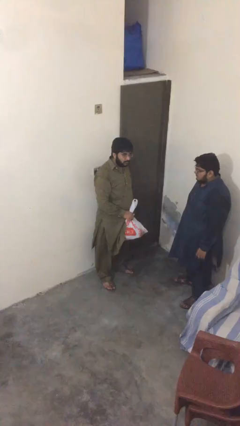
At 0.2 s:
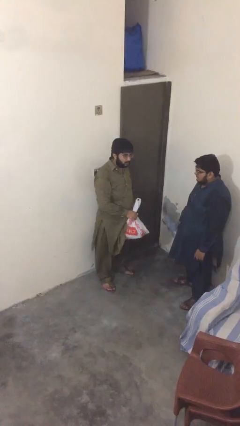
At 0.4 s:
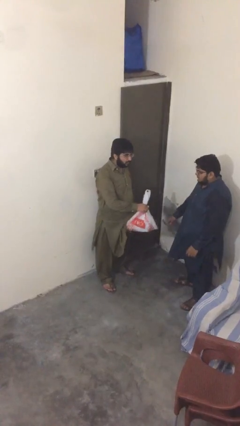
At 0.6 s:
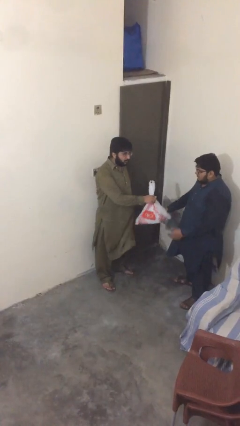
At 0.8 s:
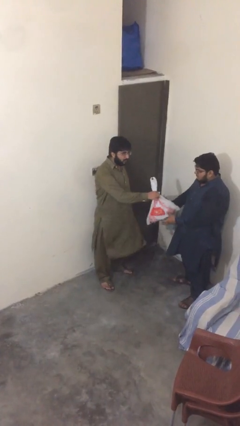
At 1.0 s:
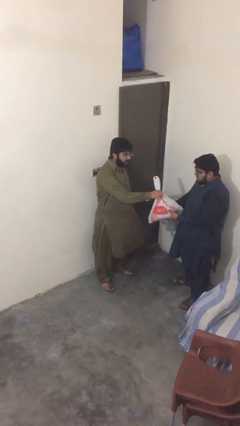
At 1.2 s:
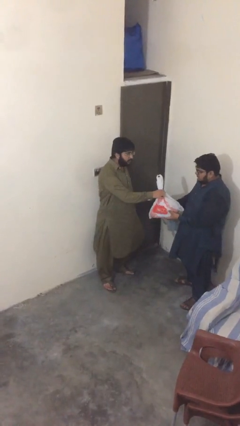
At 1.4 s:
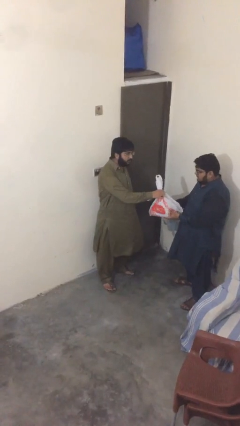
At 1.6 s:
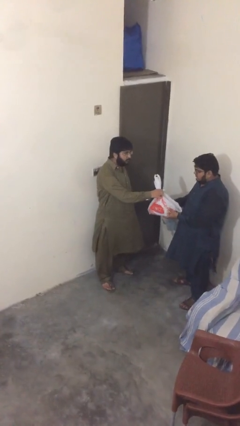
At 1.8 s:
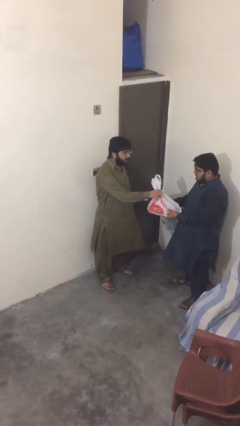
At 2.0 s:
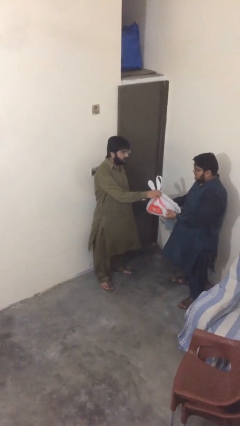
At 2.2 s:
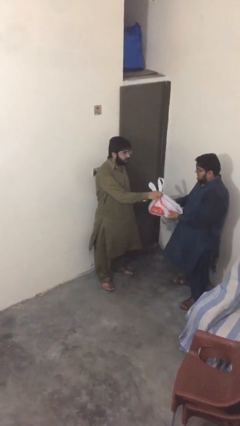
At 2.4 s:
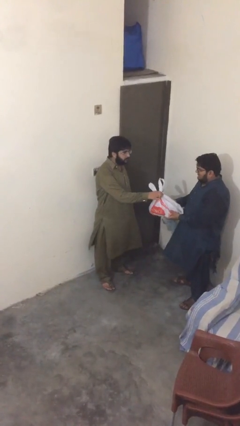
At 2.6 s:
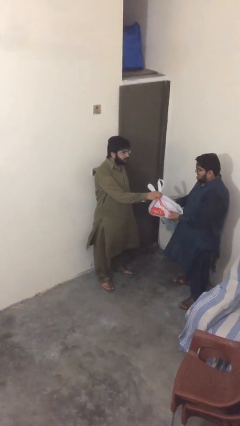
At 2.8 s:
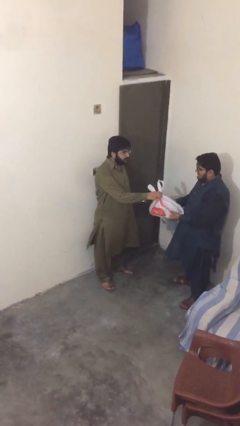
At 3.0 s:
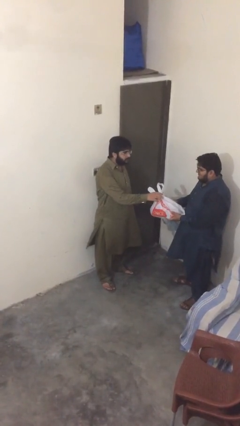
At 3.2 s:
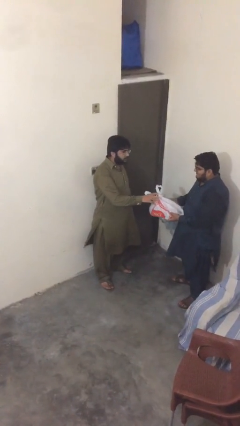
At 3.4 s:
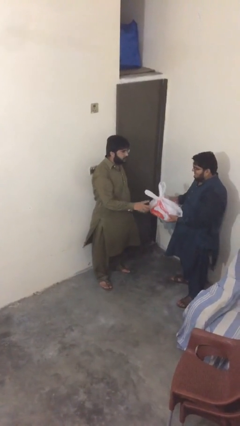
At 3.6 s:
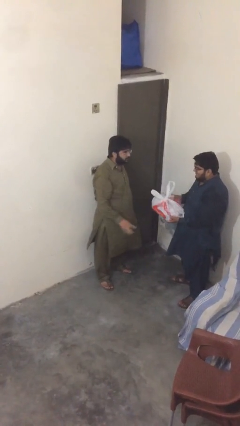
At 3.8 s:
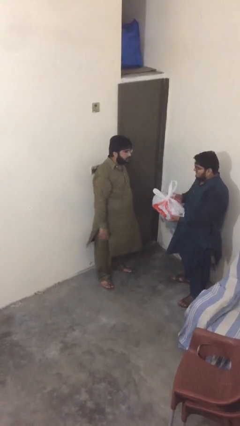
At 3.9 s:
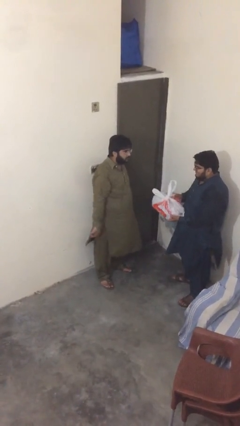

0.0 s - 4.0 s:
person transfers object to person

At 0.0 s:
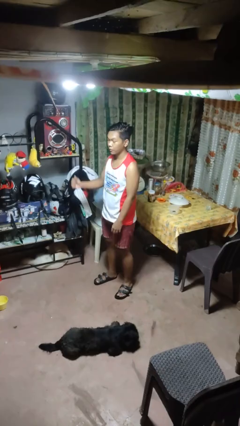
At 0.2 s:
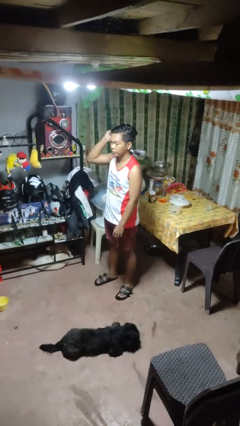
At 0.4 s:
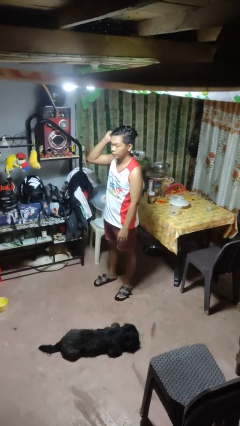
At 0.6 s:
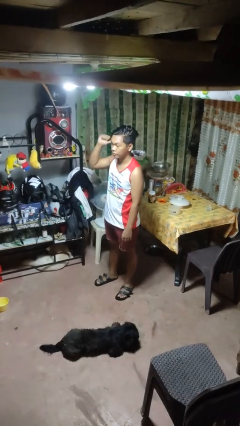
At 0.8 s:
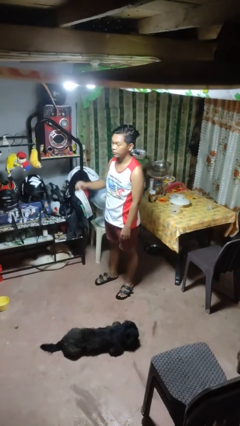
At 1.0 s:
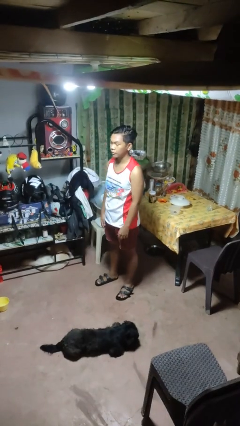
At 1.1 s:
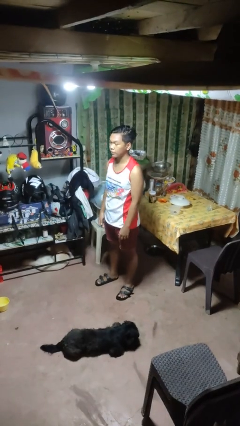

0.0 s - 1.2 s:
person gestures behind me

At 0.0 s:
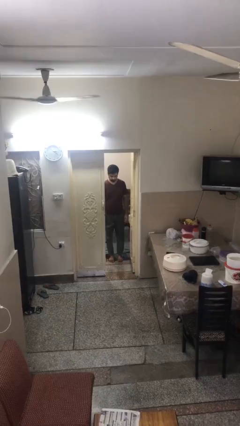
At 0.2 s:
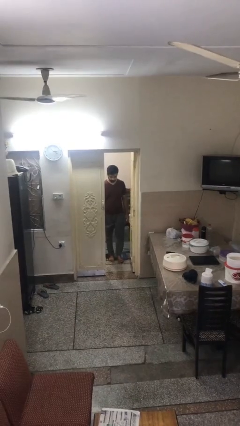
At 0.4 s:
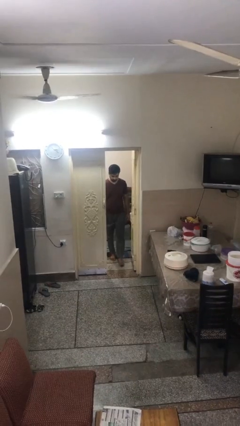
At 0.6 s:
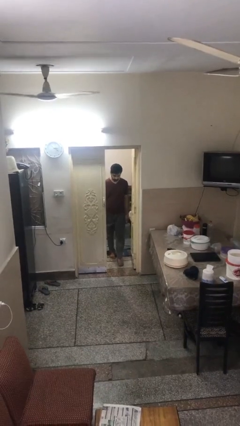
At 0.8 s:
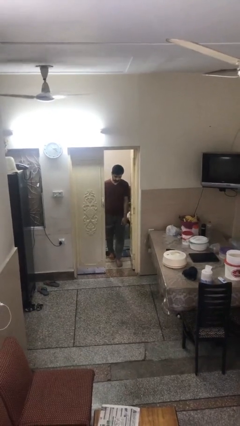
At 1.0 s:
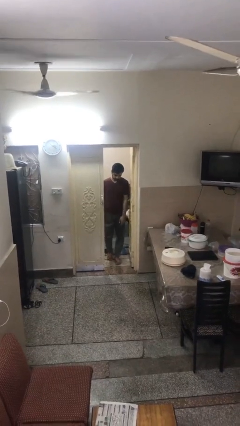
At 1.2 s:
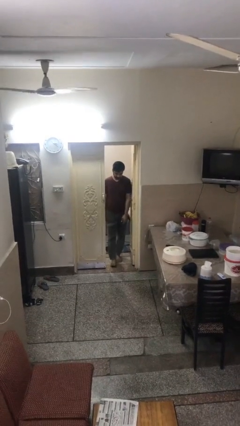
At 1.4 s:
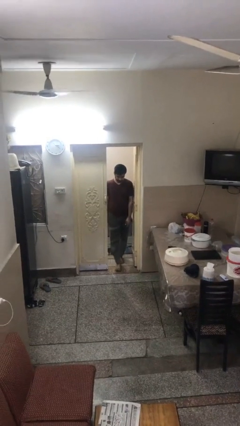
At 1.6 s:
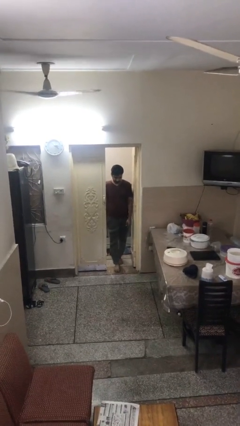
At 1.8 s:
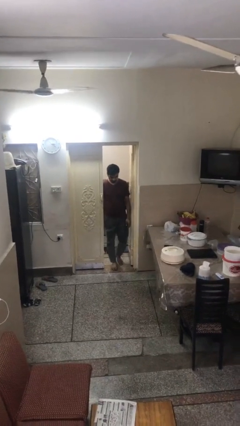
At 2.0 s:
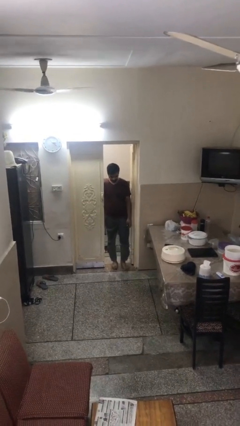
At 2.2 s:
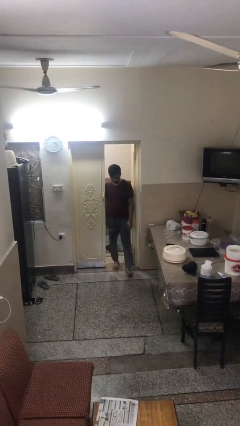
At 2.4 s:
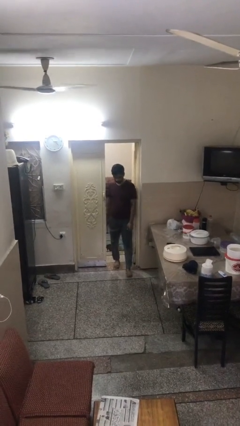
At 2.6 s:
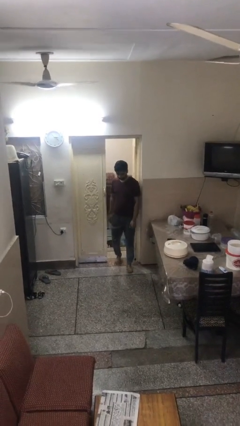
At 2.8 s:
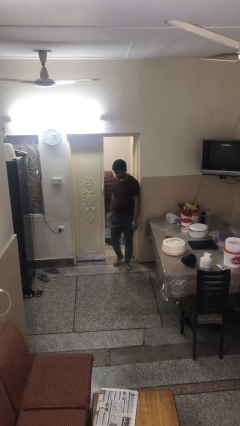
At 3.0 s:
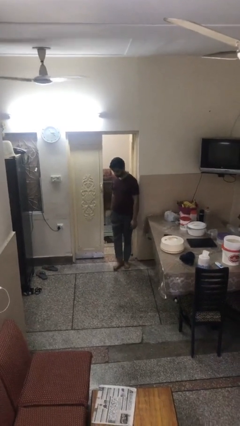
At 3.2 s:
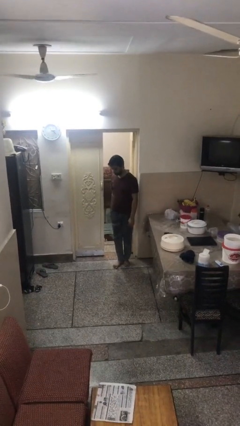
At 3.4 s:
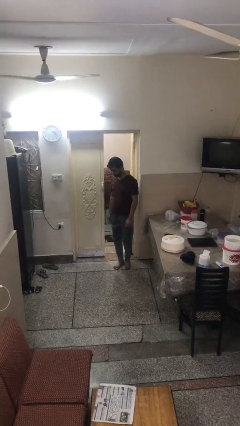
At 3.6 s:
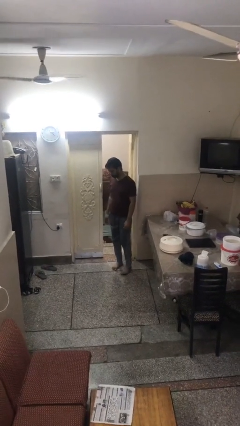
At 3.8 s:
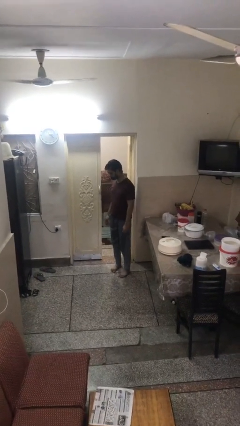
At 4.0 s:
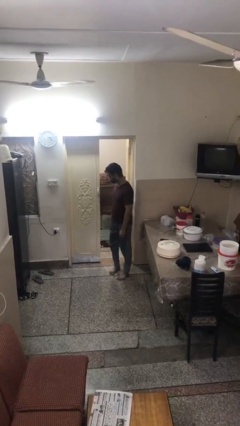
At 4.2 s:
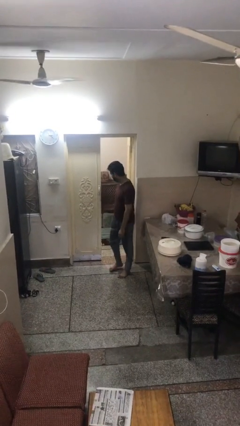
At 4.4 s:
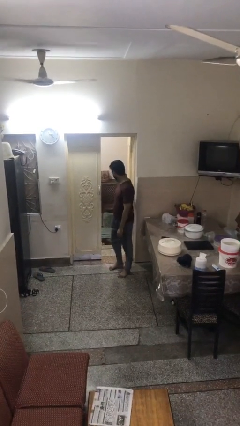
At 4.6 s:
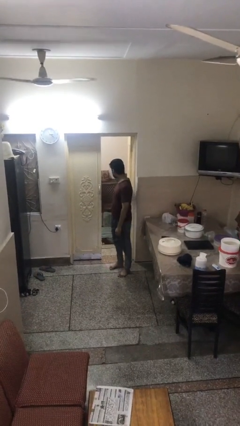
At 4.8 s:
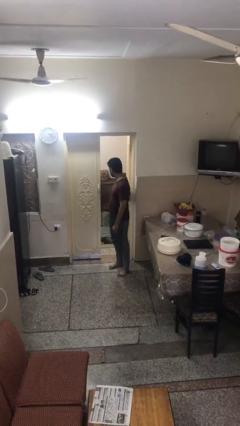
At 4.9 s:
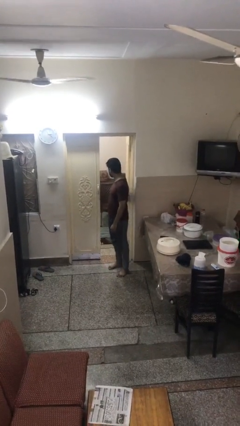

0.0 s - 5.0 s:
person enters scene through structure

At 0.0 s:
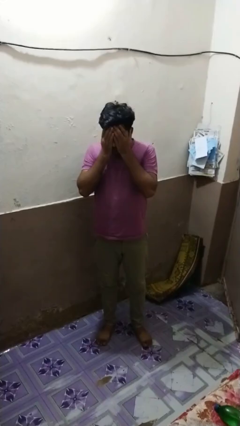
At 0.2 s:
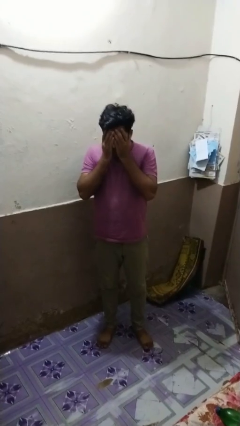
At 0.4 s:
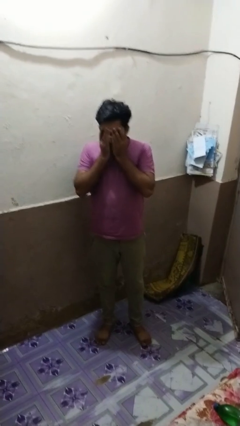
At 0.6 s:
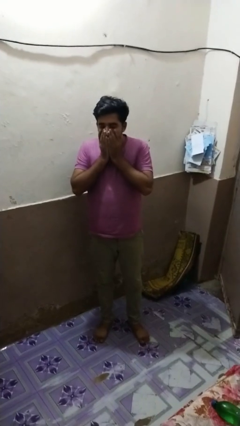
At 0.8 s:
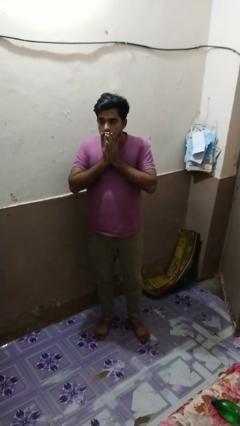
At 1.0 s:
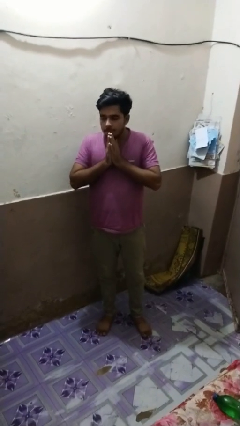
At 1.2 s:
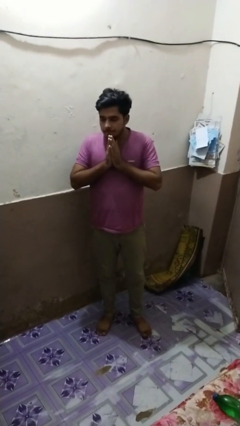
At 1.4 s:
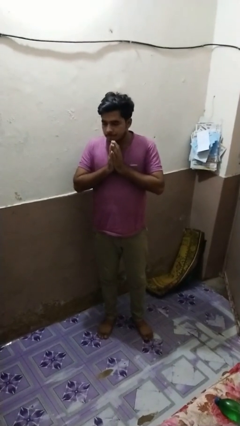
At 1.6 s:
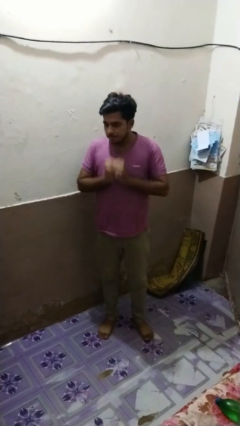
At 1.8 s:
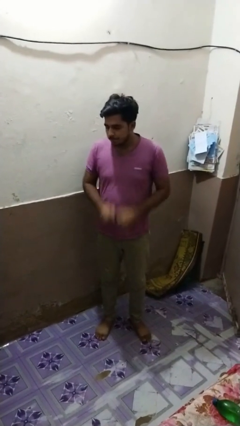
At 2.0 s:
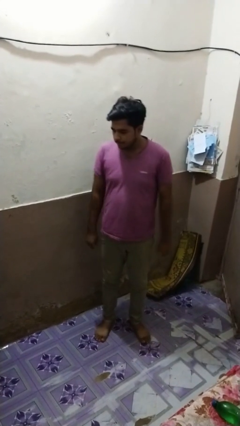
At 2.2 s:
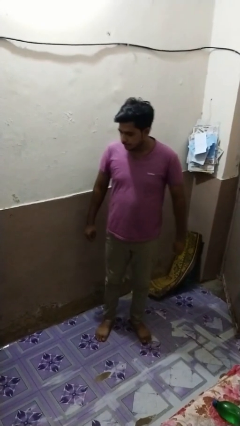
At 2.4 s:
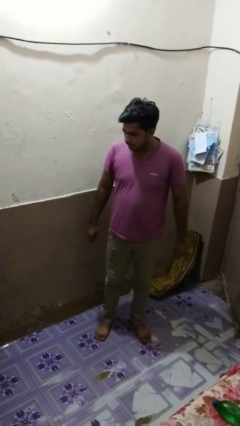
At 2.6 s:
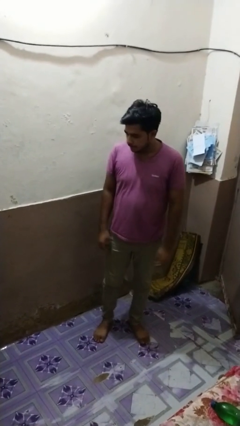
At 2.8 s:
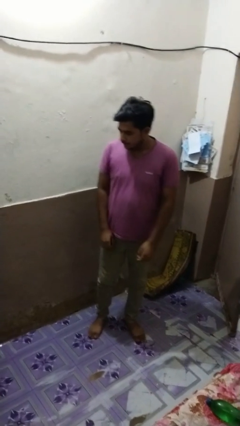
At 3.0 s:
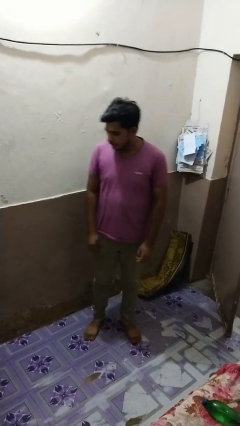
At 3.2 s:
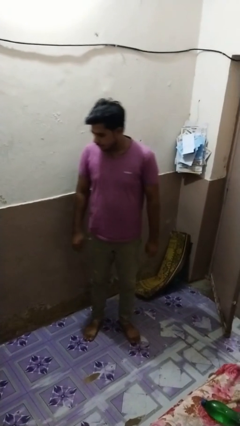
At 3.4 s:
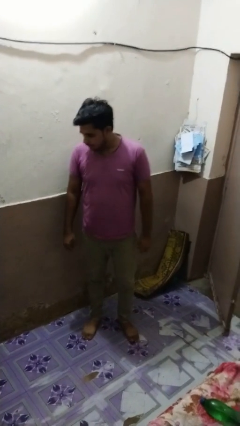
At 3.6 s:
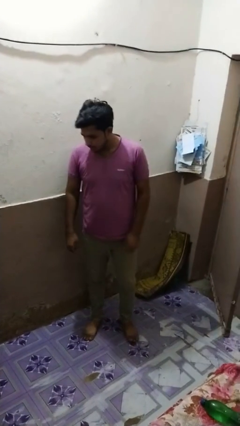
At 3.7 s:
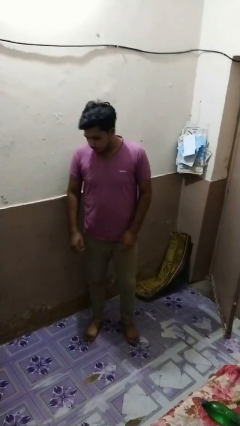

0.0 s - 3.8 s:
person covers face with hands

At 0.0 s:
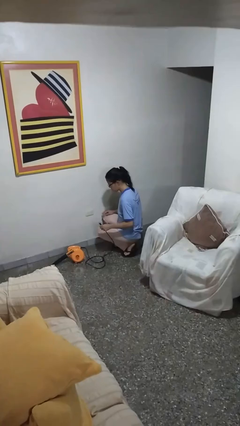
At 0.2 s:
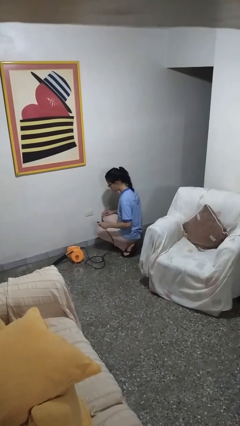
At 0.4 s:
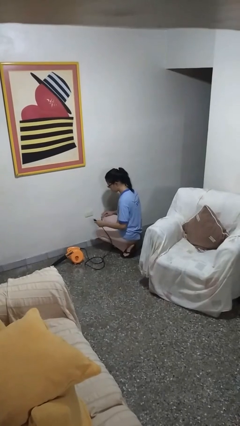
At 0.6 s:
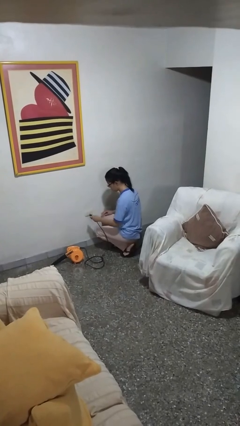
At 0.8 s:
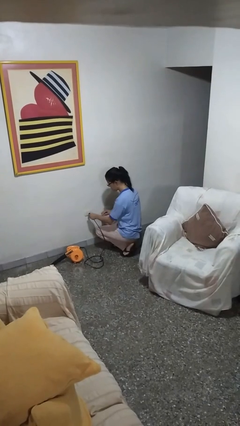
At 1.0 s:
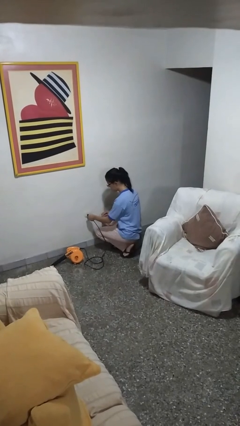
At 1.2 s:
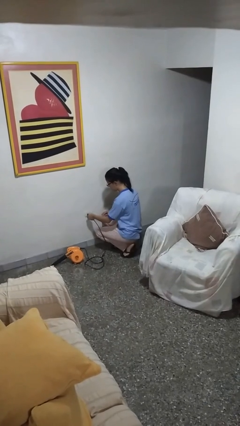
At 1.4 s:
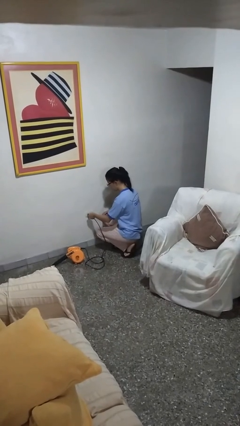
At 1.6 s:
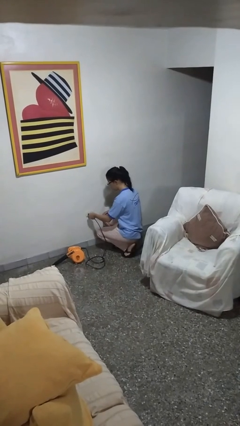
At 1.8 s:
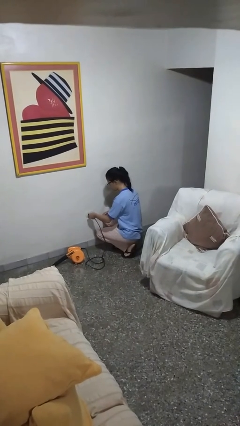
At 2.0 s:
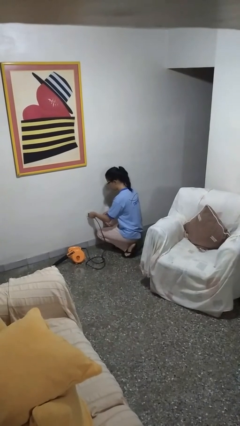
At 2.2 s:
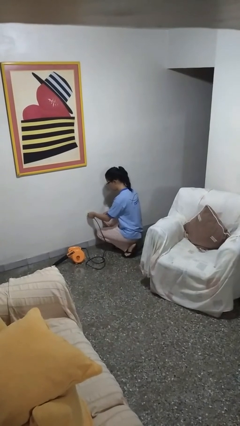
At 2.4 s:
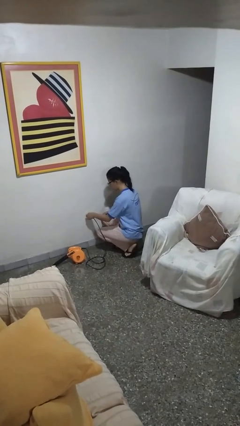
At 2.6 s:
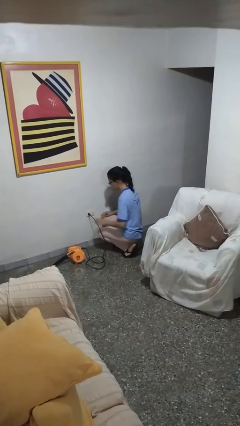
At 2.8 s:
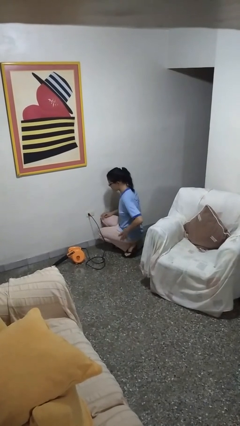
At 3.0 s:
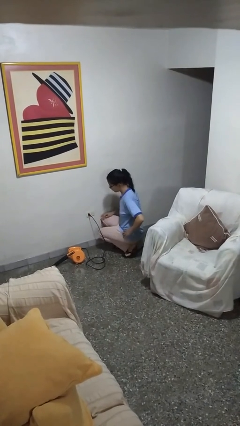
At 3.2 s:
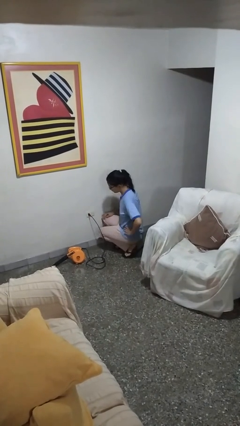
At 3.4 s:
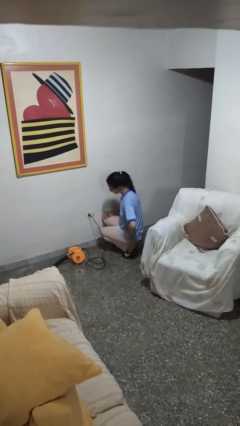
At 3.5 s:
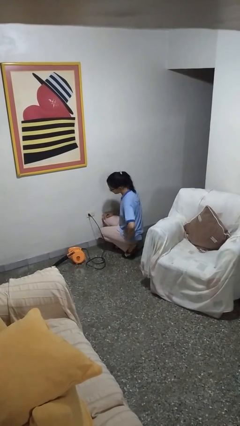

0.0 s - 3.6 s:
person plugs into electrical socket
